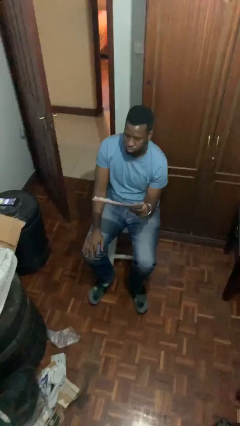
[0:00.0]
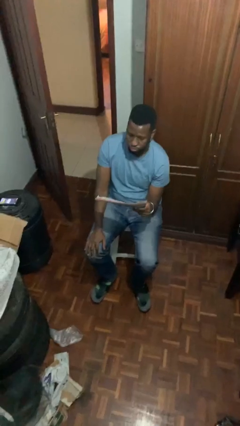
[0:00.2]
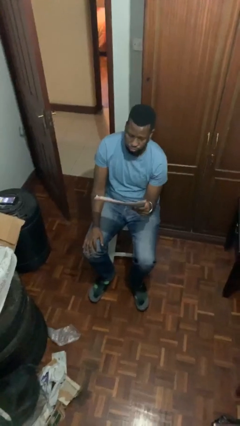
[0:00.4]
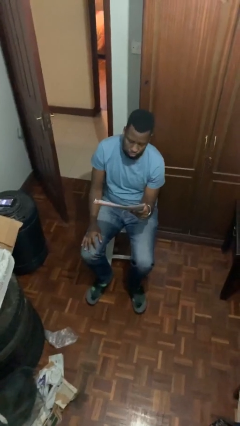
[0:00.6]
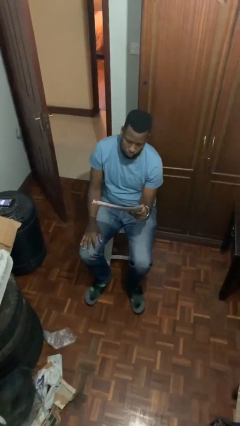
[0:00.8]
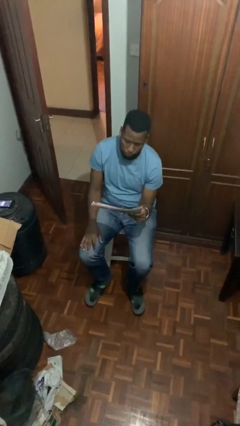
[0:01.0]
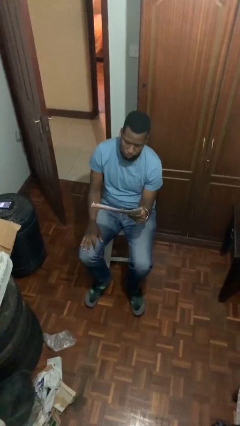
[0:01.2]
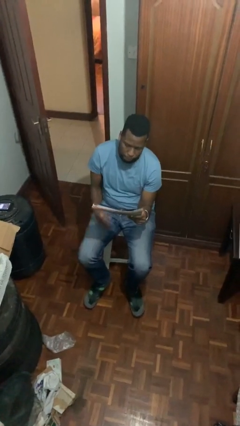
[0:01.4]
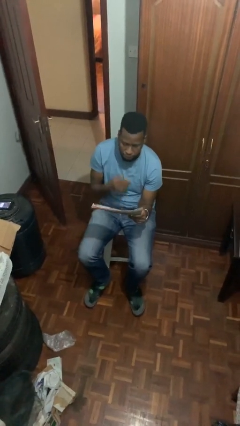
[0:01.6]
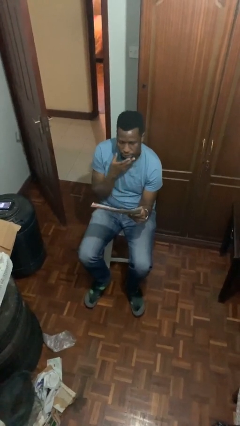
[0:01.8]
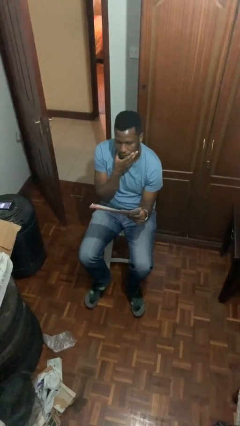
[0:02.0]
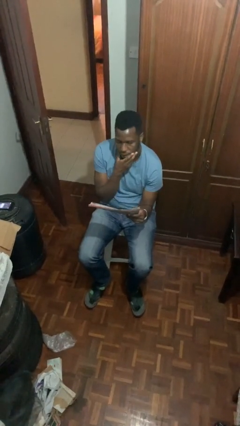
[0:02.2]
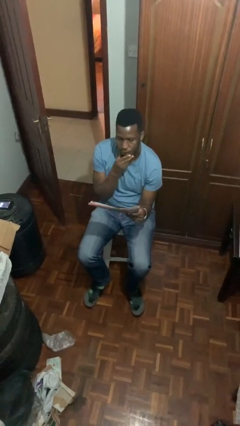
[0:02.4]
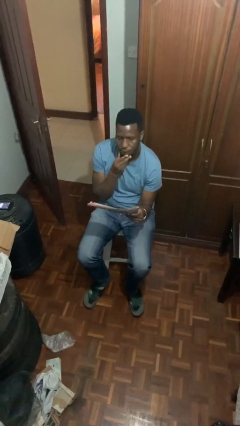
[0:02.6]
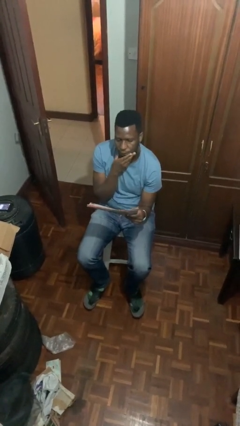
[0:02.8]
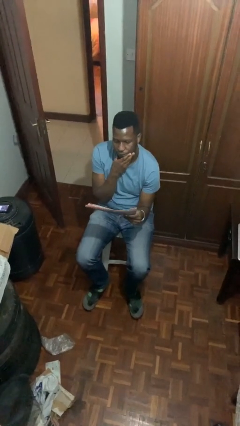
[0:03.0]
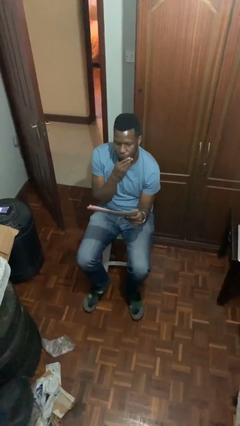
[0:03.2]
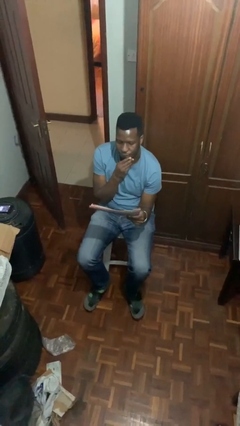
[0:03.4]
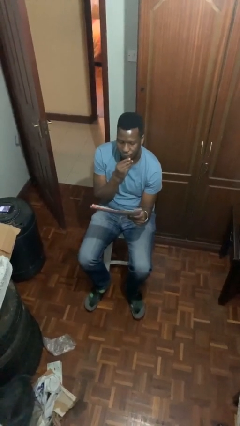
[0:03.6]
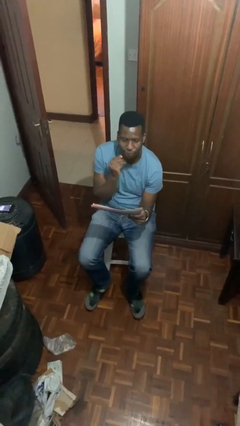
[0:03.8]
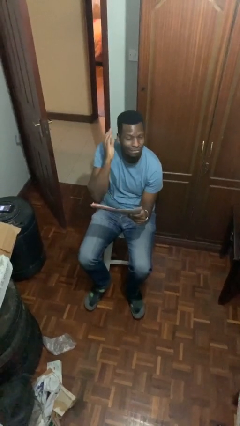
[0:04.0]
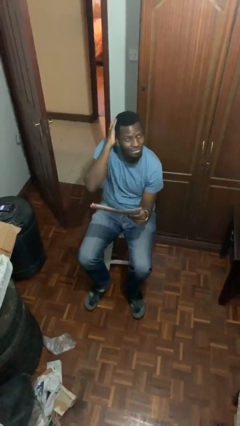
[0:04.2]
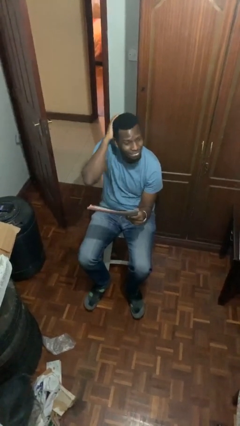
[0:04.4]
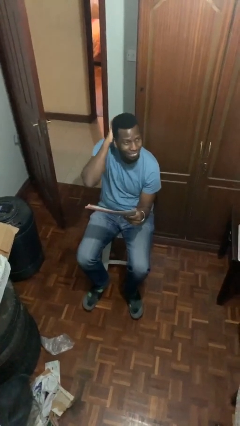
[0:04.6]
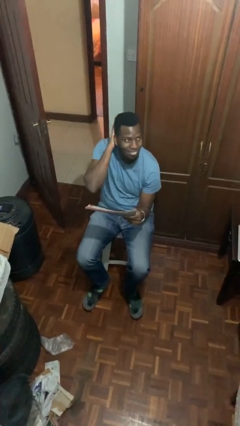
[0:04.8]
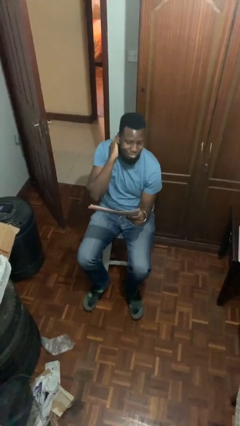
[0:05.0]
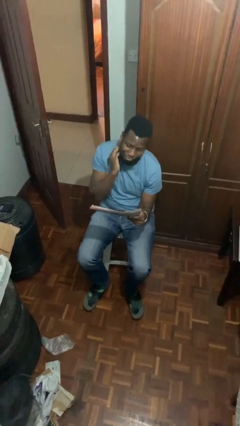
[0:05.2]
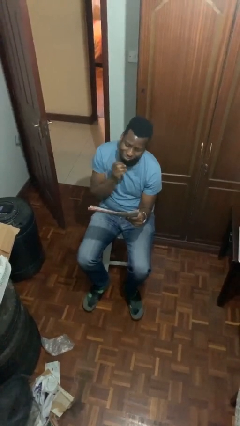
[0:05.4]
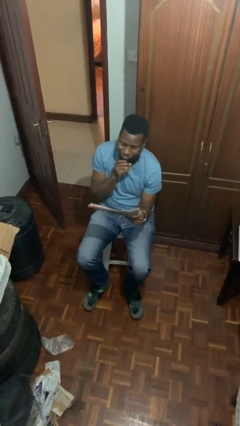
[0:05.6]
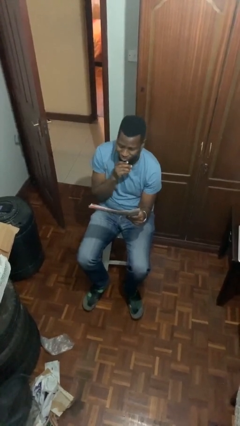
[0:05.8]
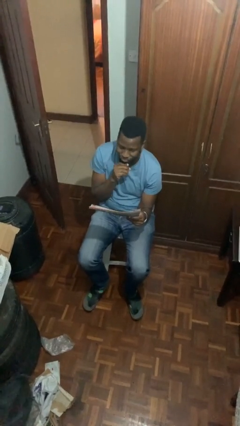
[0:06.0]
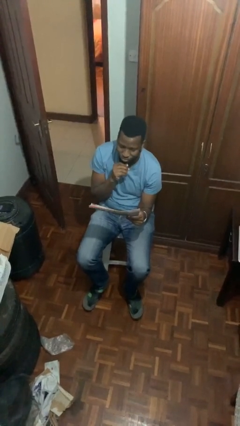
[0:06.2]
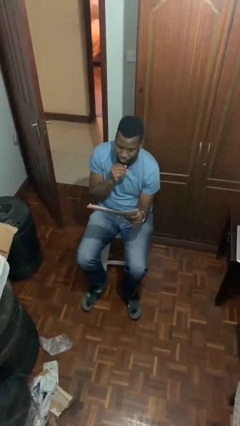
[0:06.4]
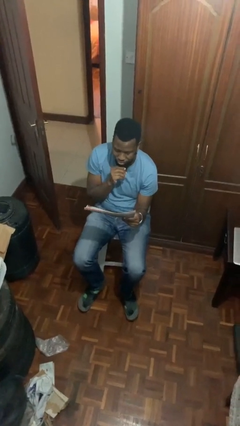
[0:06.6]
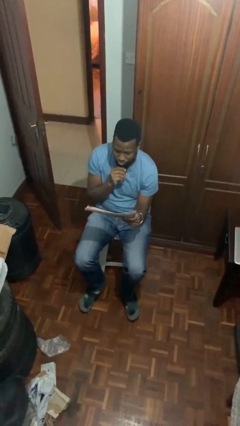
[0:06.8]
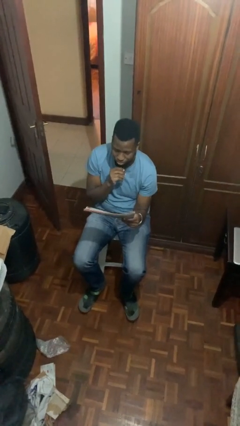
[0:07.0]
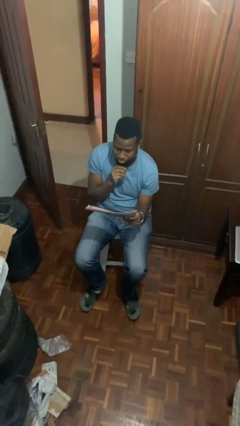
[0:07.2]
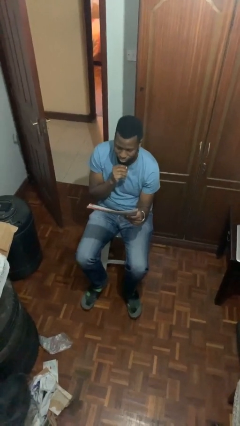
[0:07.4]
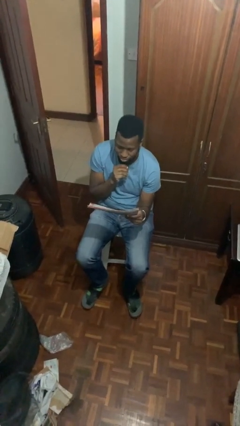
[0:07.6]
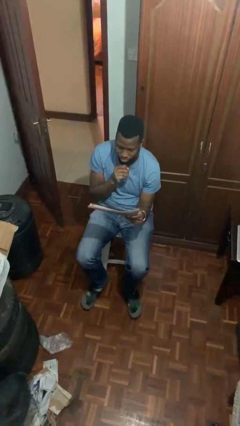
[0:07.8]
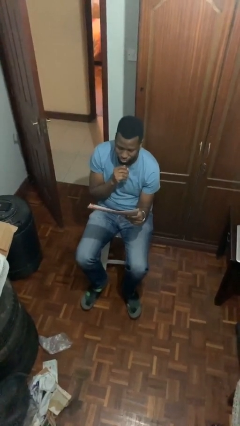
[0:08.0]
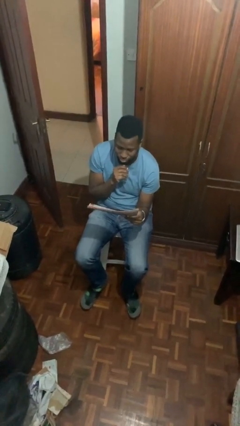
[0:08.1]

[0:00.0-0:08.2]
person reads document

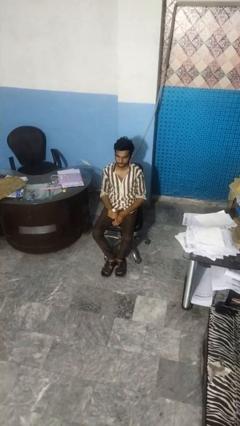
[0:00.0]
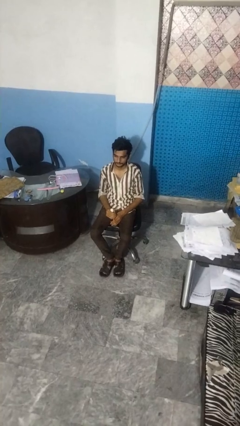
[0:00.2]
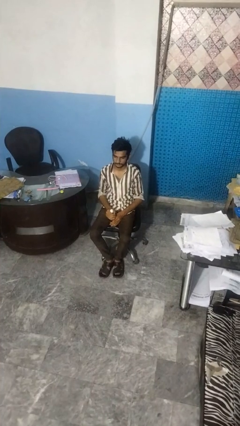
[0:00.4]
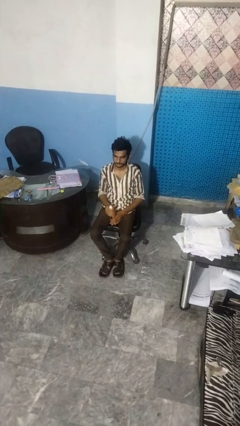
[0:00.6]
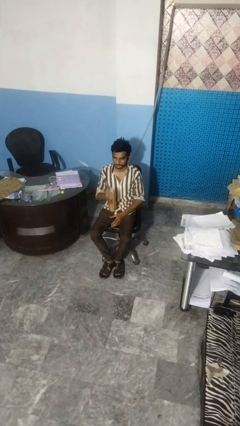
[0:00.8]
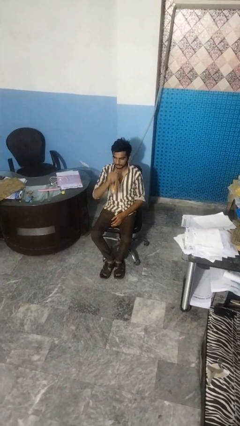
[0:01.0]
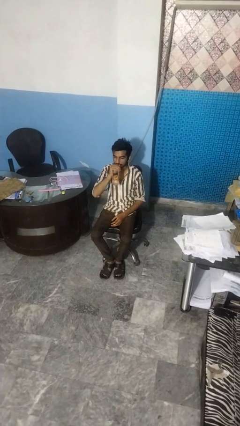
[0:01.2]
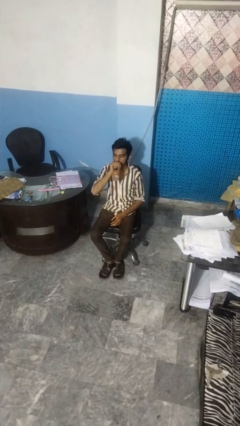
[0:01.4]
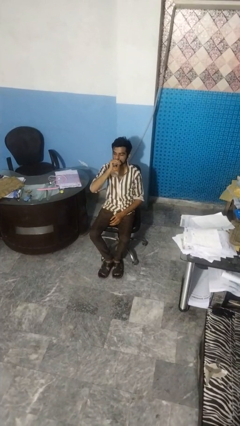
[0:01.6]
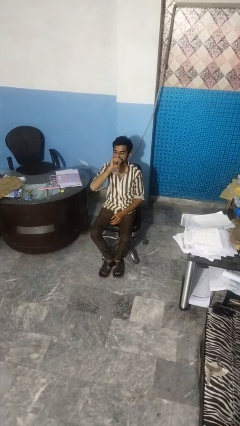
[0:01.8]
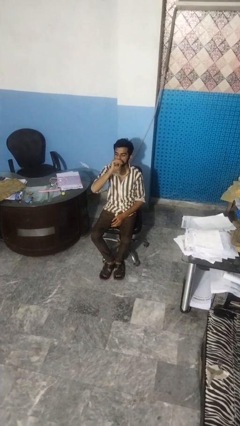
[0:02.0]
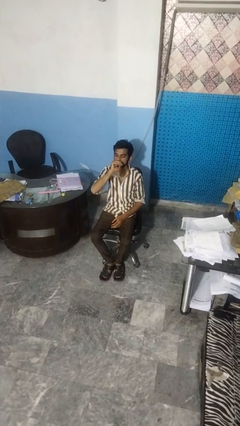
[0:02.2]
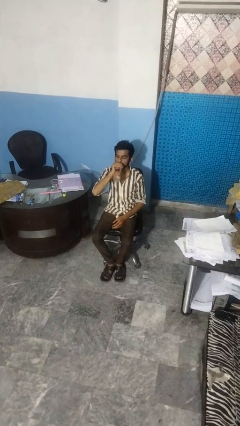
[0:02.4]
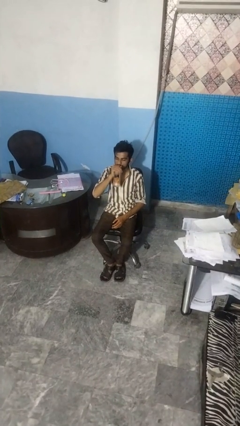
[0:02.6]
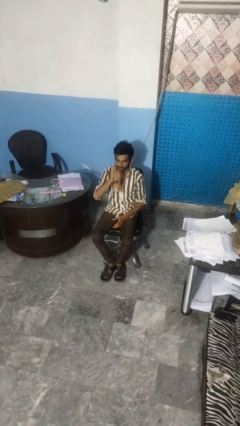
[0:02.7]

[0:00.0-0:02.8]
person drinks from bottle

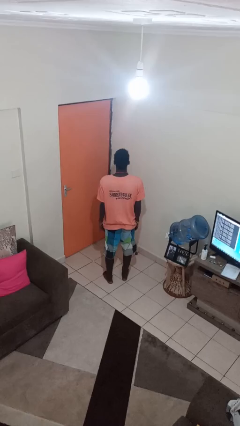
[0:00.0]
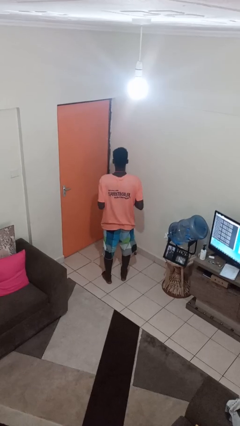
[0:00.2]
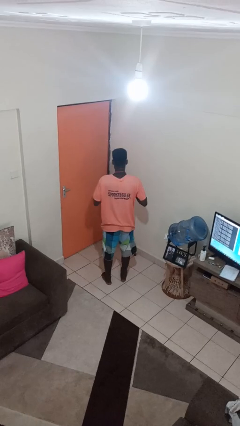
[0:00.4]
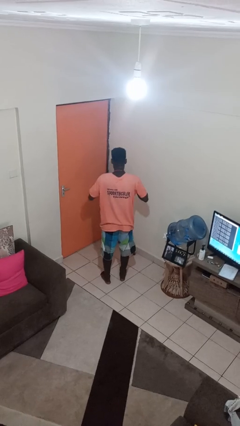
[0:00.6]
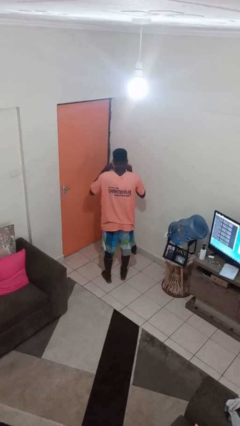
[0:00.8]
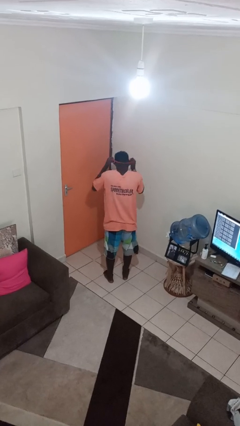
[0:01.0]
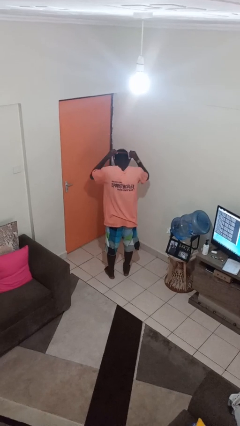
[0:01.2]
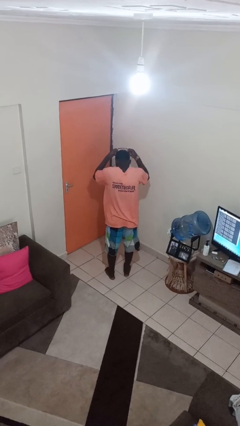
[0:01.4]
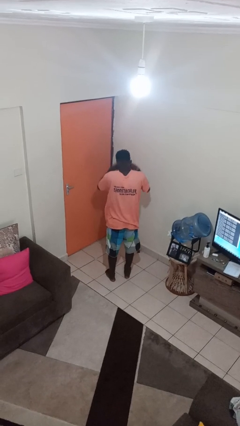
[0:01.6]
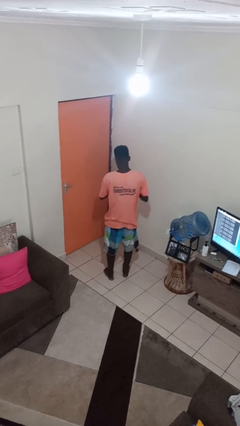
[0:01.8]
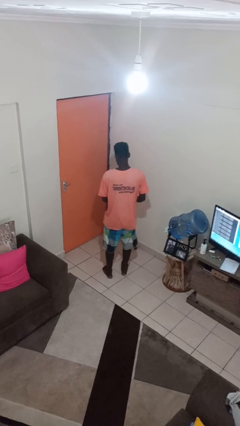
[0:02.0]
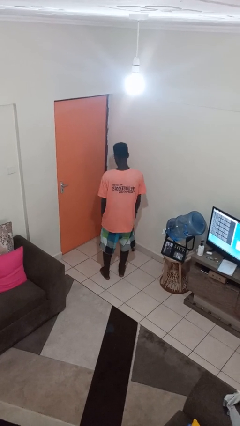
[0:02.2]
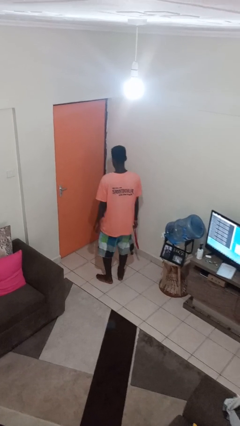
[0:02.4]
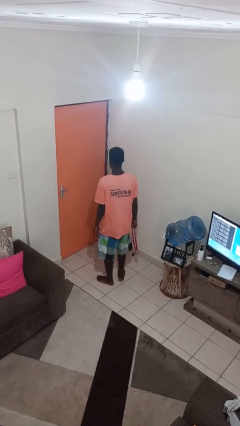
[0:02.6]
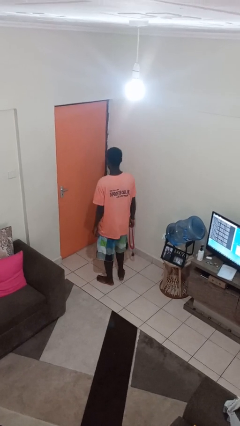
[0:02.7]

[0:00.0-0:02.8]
person takes off necklace

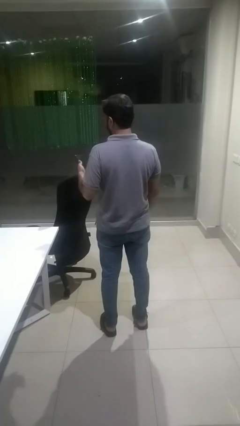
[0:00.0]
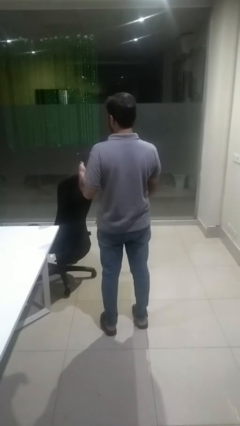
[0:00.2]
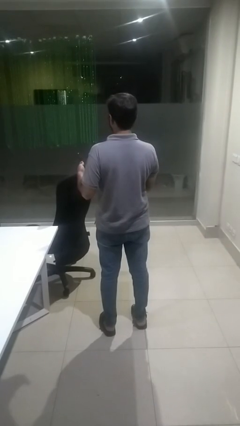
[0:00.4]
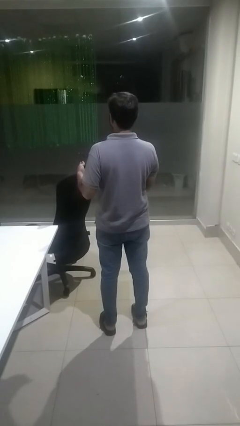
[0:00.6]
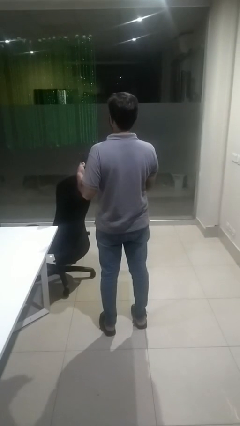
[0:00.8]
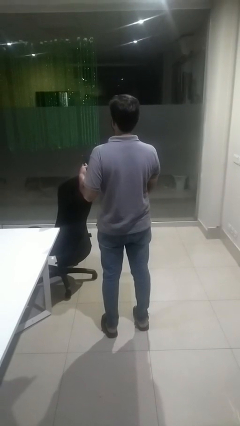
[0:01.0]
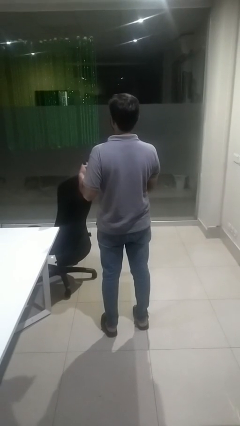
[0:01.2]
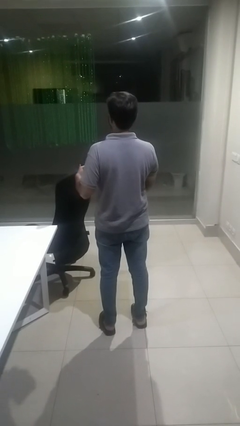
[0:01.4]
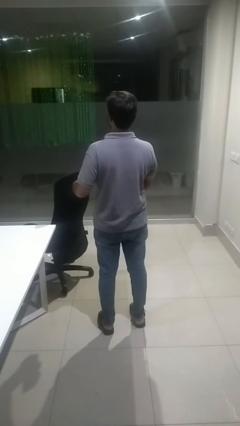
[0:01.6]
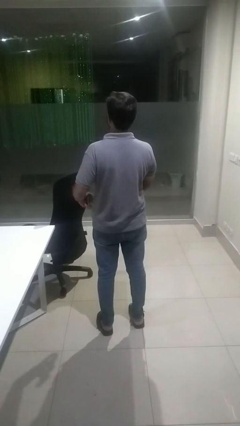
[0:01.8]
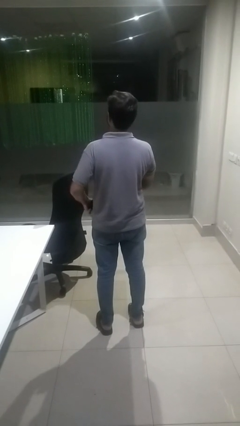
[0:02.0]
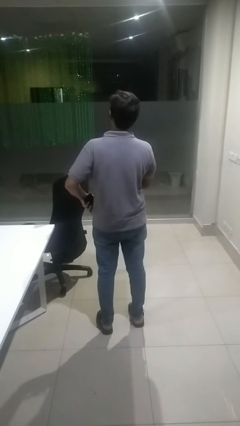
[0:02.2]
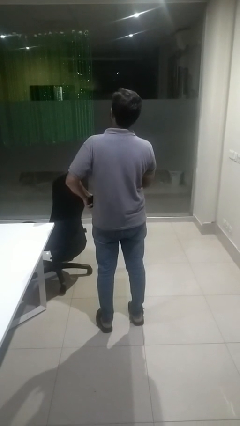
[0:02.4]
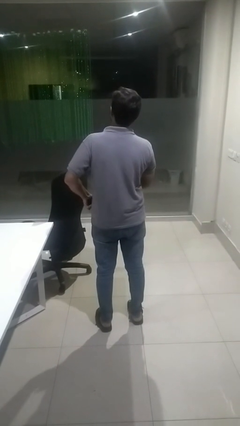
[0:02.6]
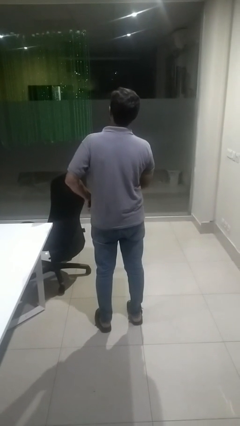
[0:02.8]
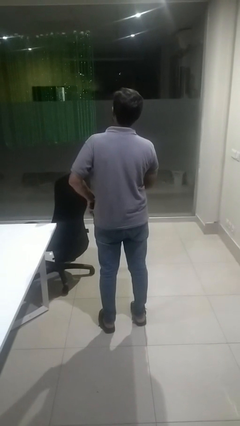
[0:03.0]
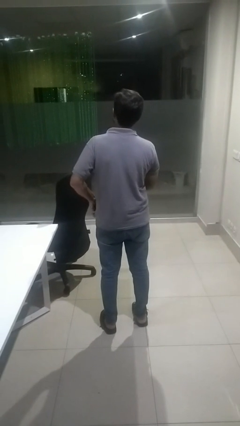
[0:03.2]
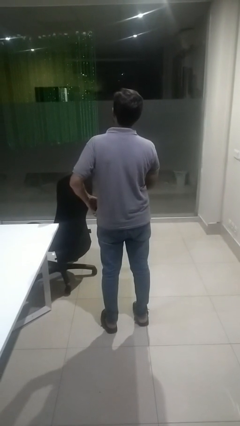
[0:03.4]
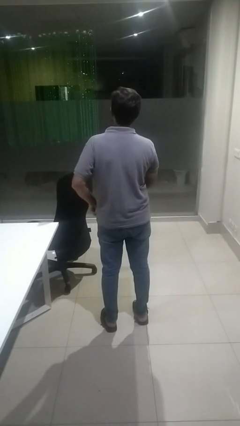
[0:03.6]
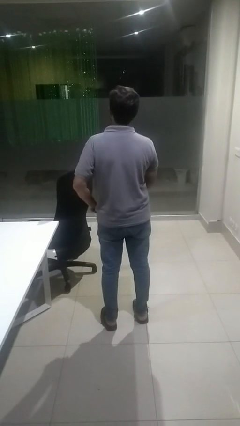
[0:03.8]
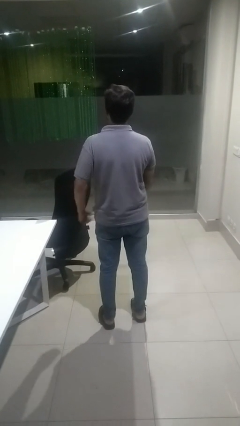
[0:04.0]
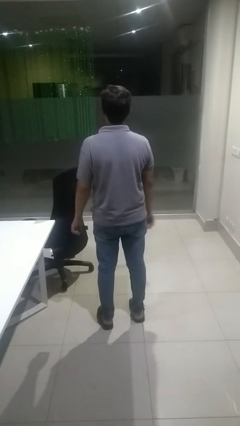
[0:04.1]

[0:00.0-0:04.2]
person puts phone into pocket

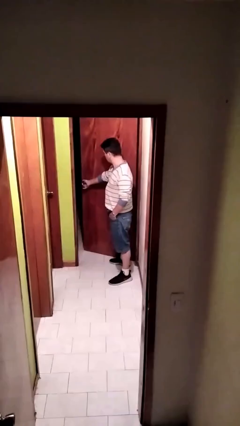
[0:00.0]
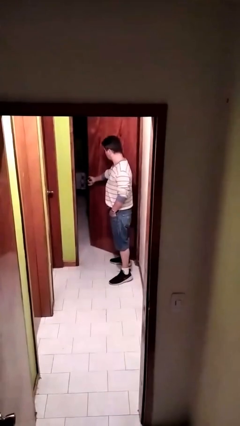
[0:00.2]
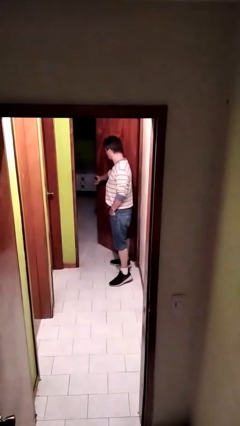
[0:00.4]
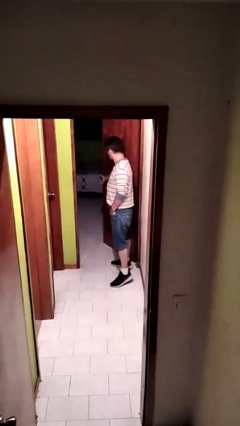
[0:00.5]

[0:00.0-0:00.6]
person opens facility door
